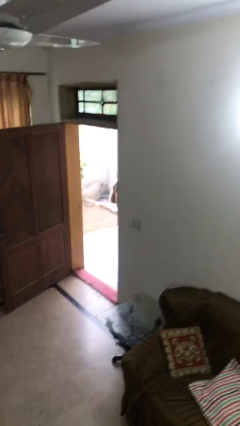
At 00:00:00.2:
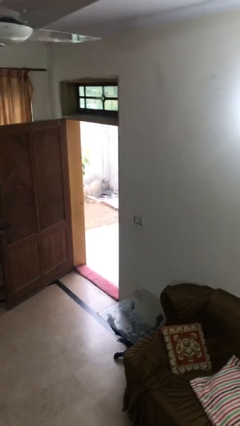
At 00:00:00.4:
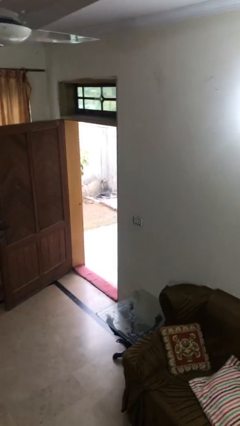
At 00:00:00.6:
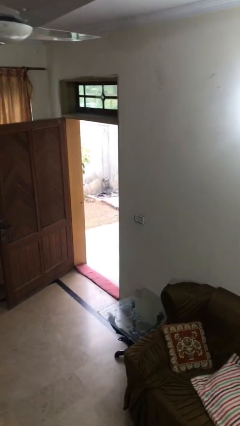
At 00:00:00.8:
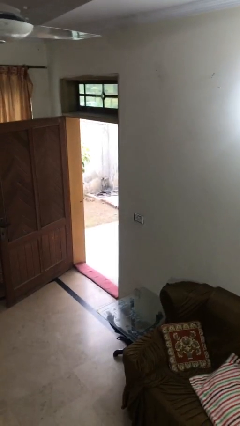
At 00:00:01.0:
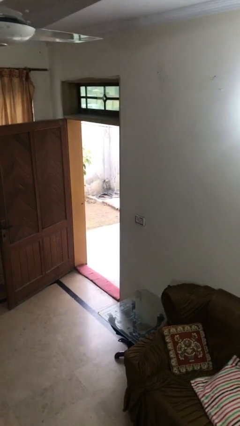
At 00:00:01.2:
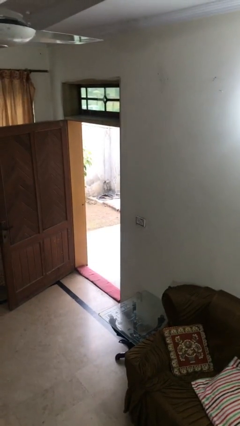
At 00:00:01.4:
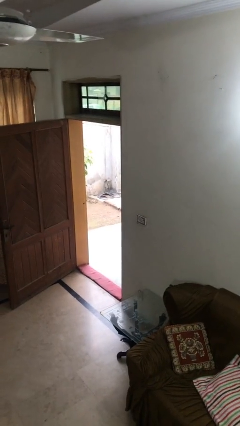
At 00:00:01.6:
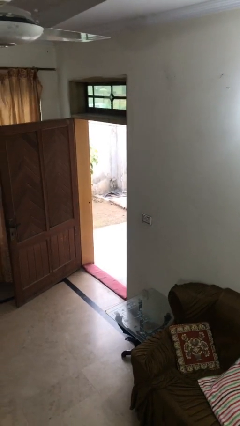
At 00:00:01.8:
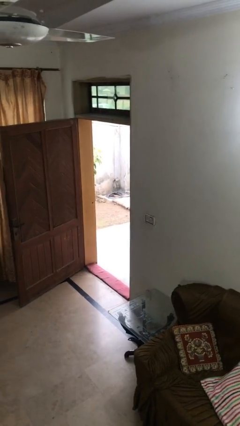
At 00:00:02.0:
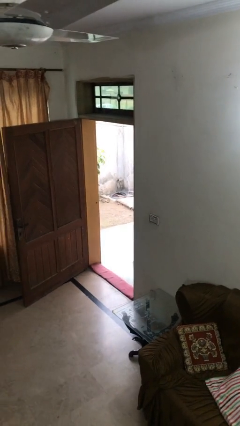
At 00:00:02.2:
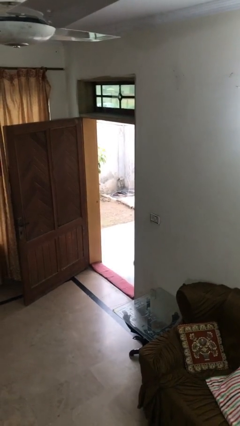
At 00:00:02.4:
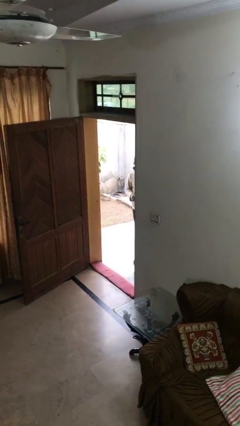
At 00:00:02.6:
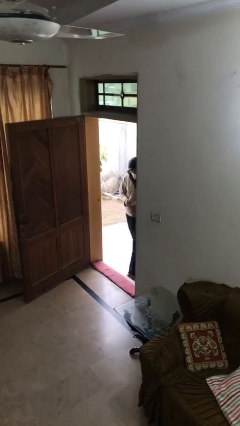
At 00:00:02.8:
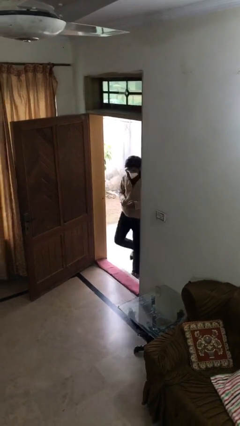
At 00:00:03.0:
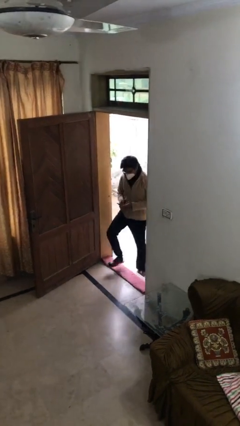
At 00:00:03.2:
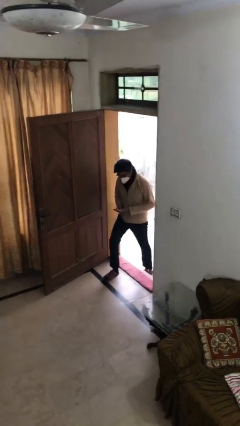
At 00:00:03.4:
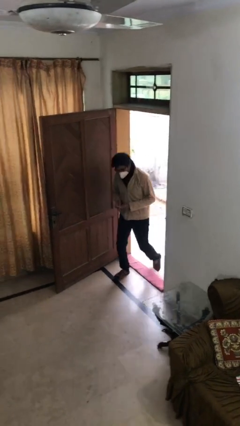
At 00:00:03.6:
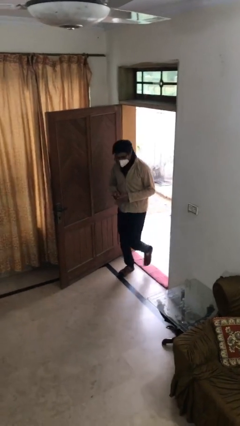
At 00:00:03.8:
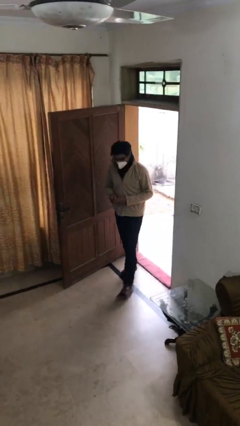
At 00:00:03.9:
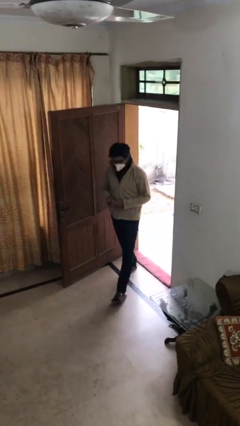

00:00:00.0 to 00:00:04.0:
person enters scene through structure

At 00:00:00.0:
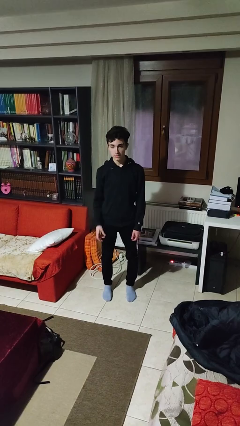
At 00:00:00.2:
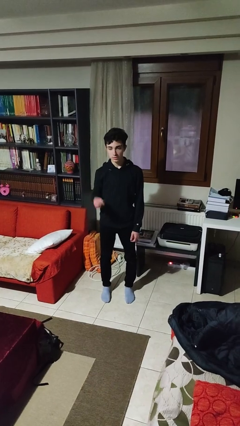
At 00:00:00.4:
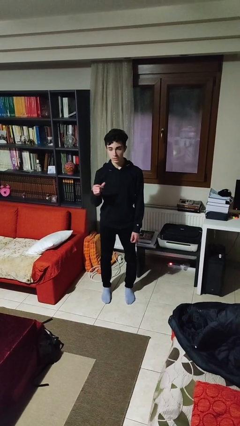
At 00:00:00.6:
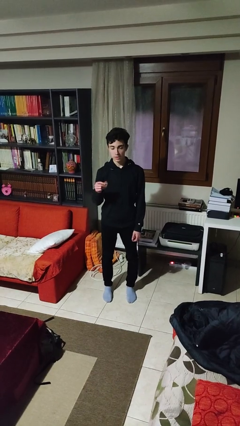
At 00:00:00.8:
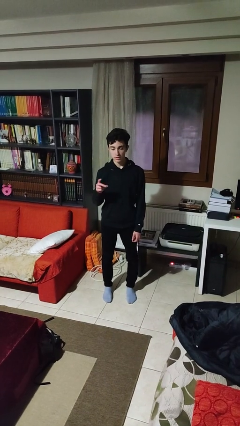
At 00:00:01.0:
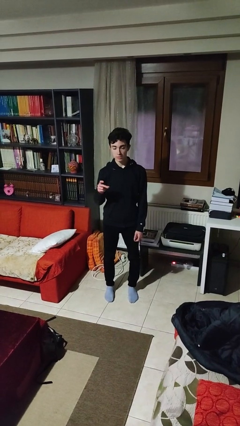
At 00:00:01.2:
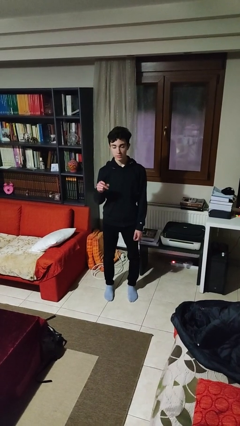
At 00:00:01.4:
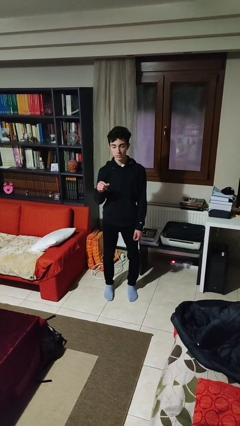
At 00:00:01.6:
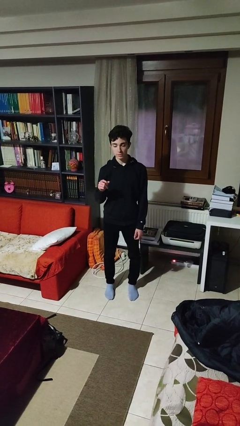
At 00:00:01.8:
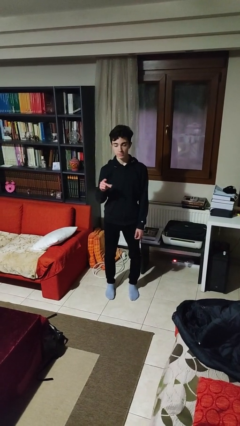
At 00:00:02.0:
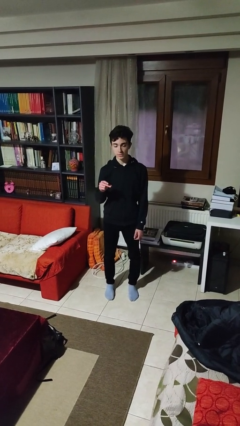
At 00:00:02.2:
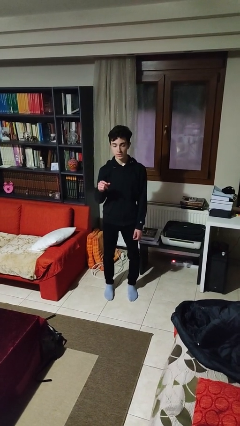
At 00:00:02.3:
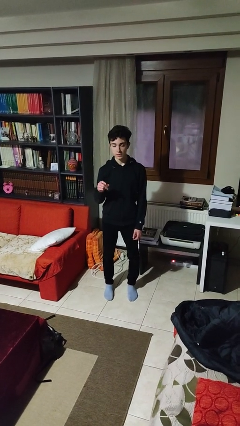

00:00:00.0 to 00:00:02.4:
person snaps fingers

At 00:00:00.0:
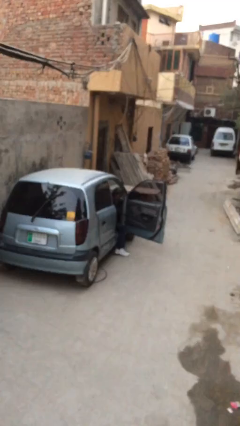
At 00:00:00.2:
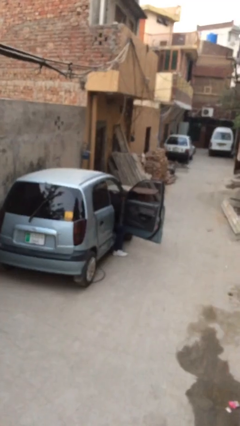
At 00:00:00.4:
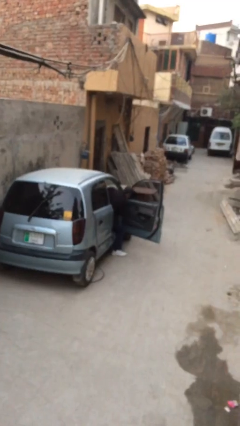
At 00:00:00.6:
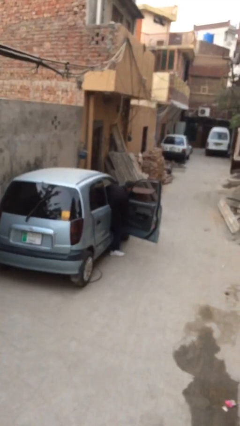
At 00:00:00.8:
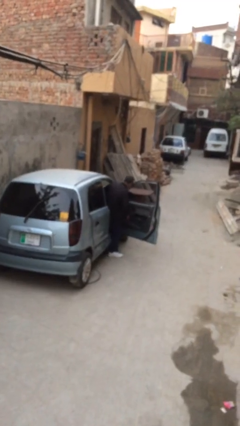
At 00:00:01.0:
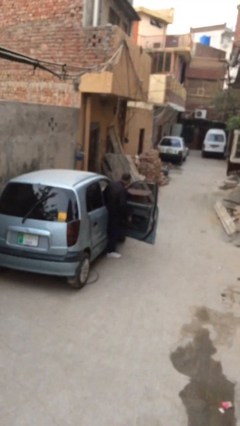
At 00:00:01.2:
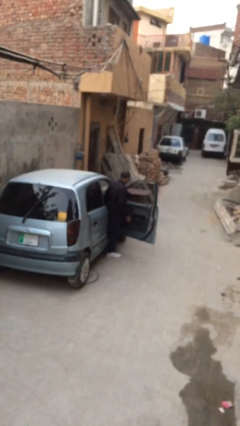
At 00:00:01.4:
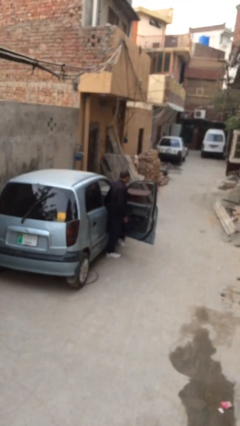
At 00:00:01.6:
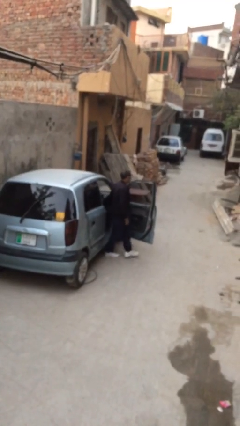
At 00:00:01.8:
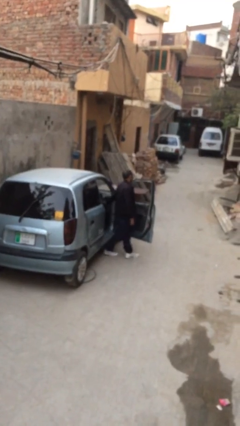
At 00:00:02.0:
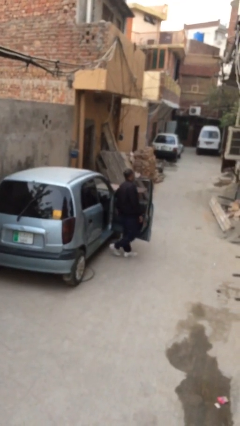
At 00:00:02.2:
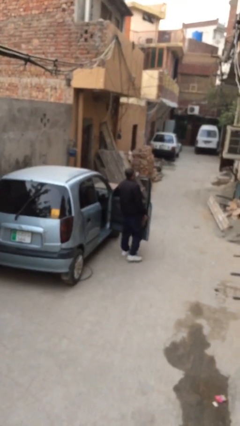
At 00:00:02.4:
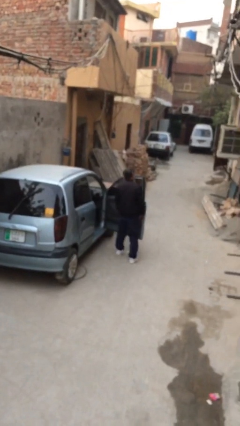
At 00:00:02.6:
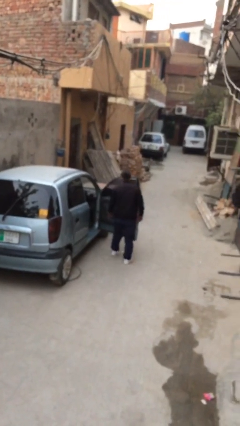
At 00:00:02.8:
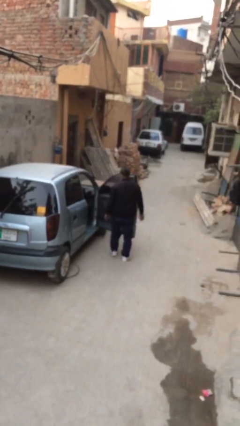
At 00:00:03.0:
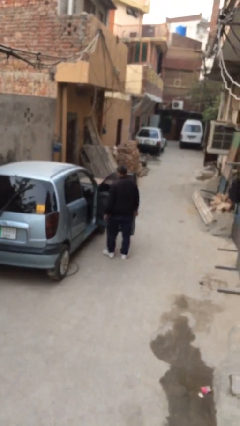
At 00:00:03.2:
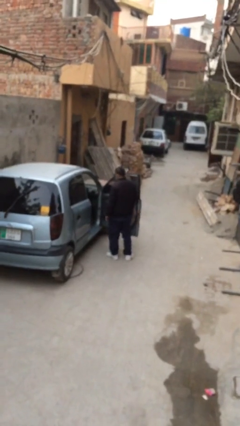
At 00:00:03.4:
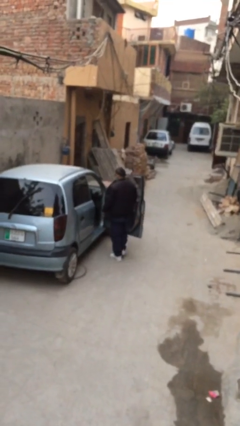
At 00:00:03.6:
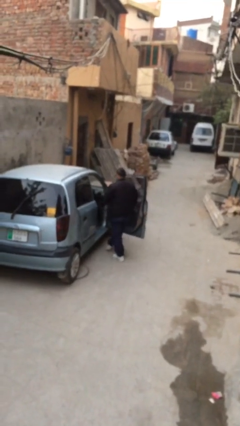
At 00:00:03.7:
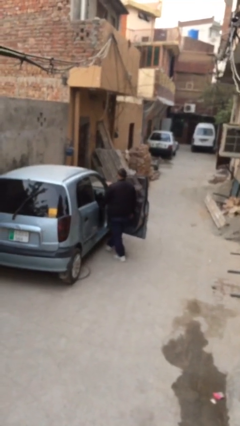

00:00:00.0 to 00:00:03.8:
person exits car

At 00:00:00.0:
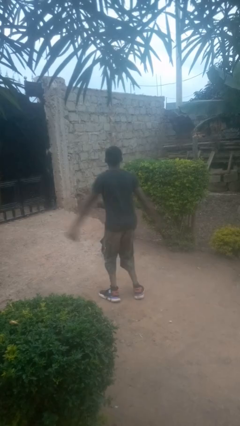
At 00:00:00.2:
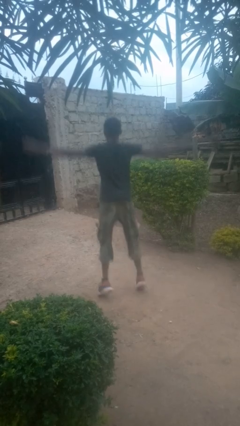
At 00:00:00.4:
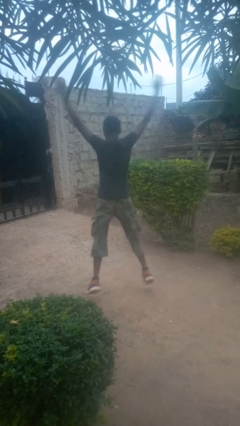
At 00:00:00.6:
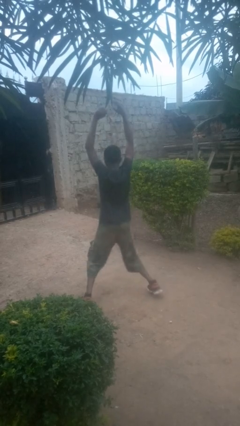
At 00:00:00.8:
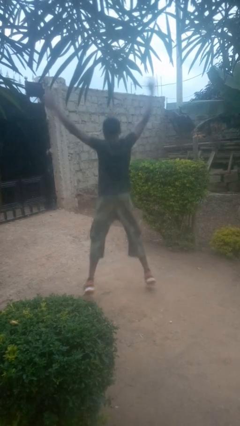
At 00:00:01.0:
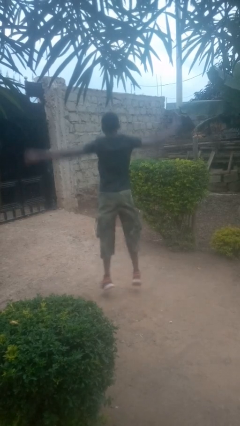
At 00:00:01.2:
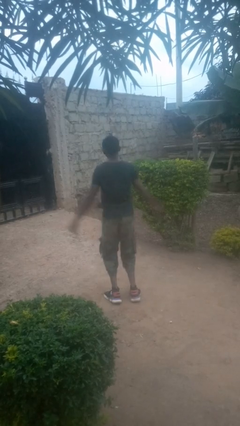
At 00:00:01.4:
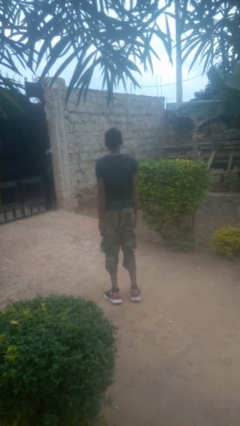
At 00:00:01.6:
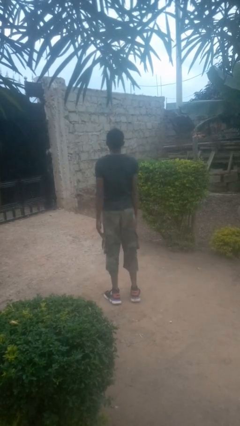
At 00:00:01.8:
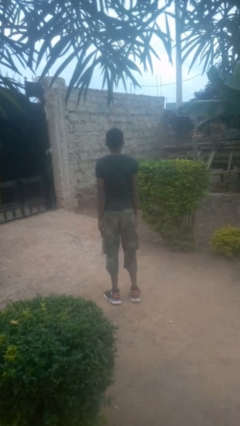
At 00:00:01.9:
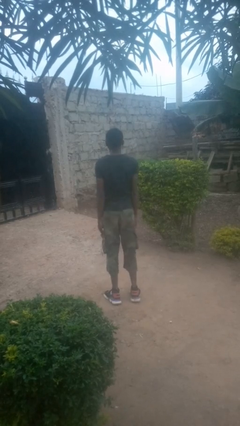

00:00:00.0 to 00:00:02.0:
person exercises with jumping jacks

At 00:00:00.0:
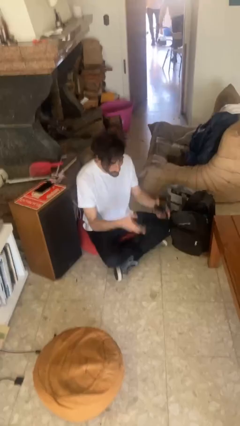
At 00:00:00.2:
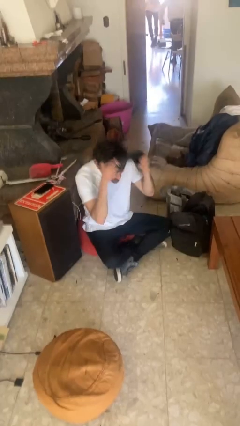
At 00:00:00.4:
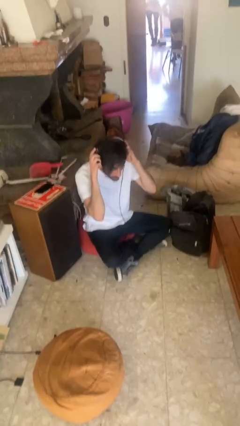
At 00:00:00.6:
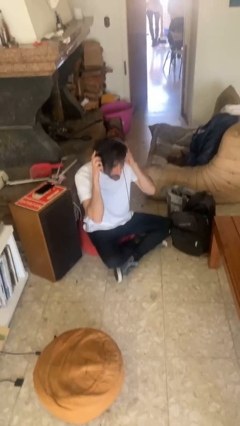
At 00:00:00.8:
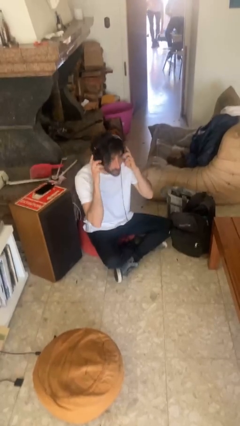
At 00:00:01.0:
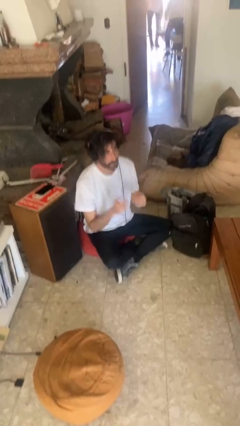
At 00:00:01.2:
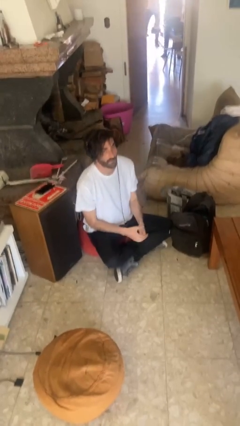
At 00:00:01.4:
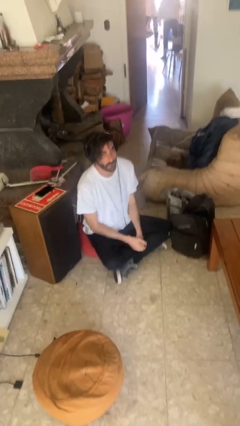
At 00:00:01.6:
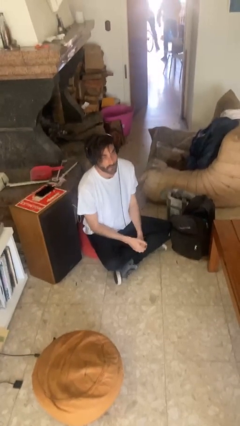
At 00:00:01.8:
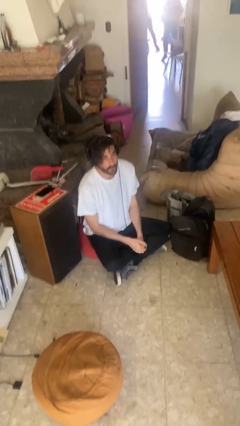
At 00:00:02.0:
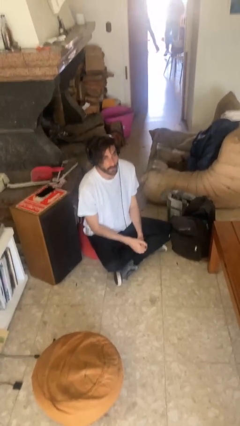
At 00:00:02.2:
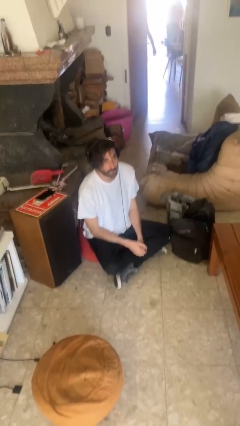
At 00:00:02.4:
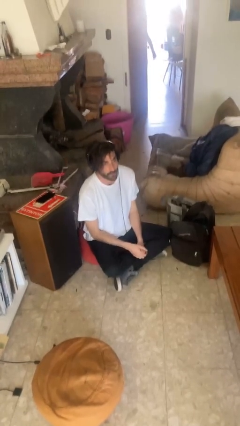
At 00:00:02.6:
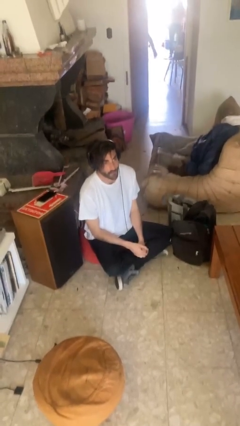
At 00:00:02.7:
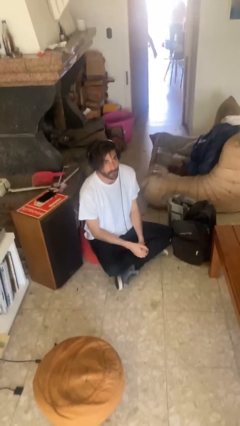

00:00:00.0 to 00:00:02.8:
person puts on headphones

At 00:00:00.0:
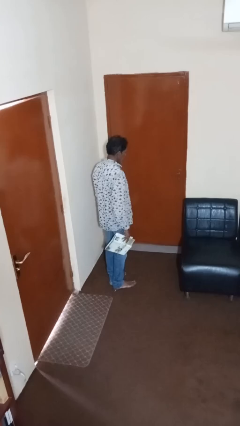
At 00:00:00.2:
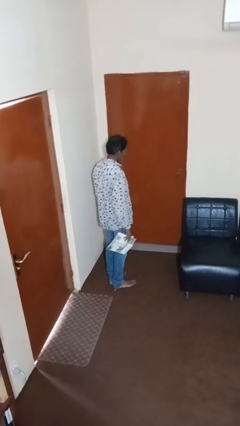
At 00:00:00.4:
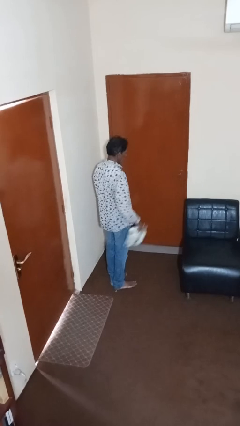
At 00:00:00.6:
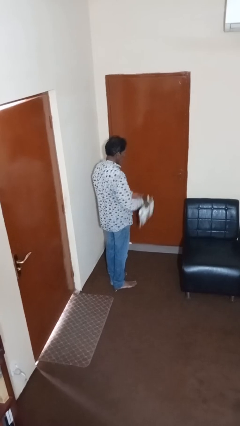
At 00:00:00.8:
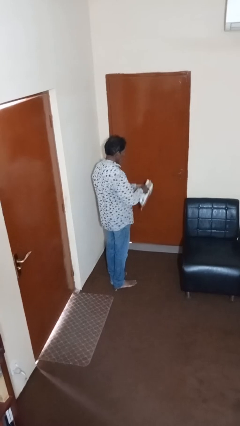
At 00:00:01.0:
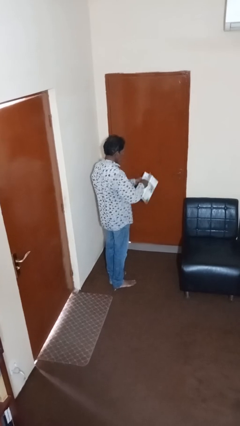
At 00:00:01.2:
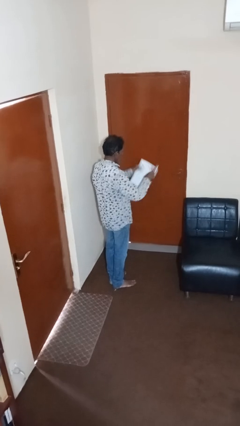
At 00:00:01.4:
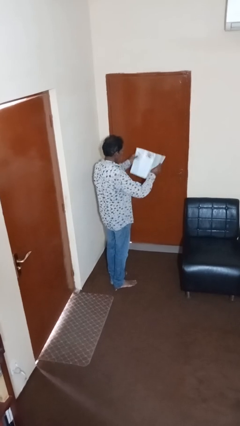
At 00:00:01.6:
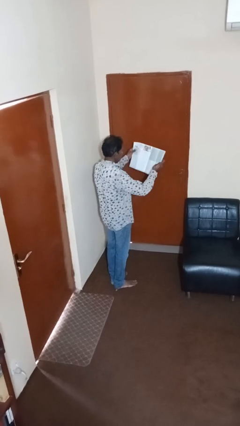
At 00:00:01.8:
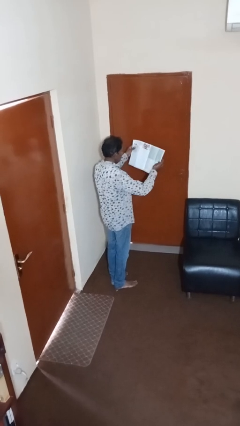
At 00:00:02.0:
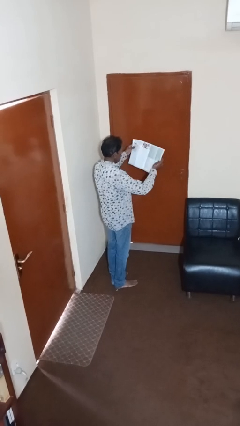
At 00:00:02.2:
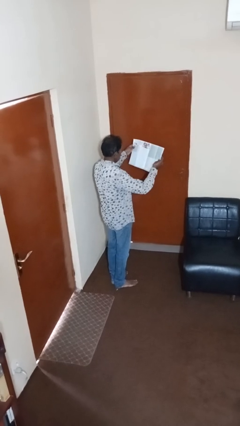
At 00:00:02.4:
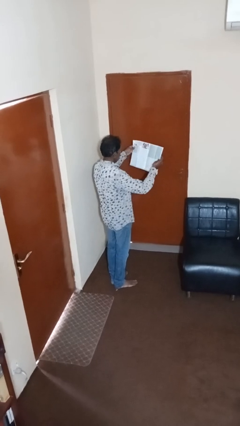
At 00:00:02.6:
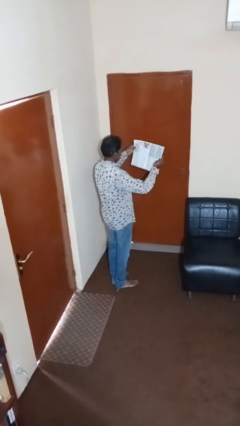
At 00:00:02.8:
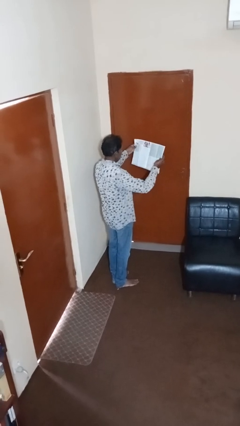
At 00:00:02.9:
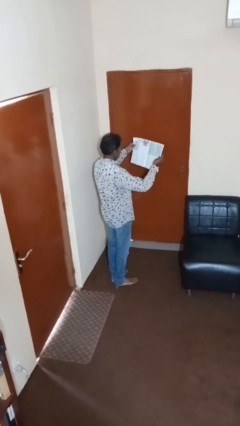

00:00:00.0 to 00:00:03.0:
person reads magazine
